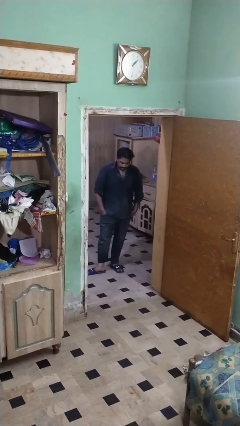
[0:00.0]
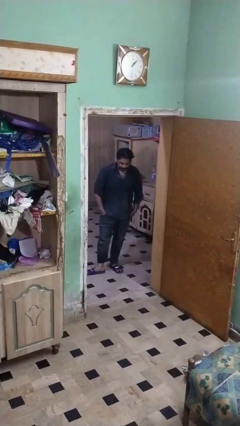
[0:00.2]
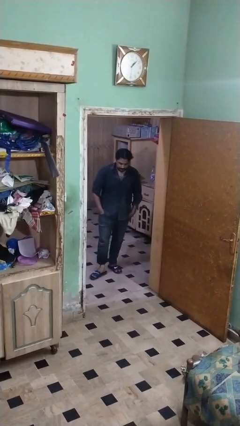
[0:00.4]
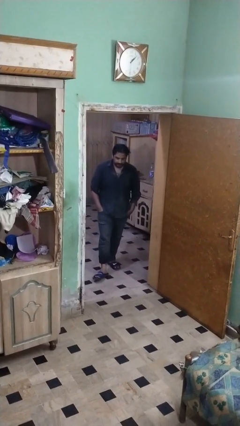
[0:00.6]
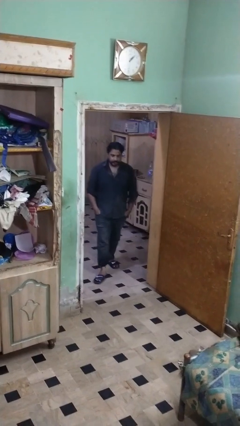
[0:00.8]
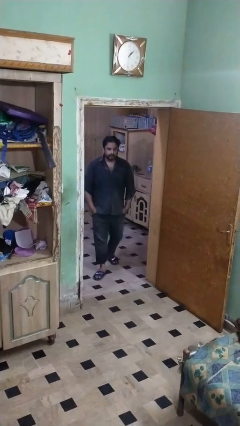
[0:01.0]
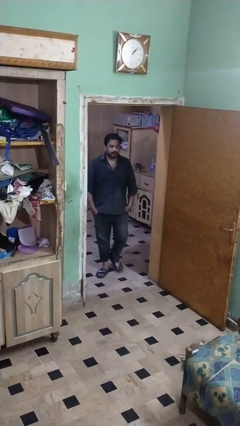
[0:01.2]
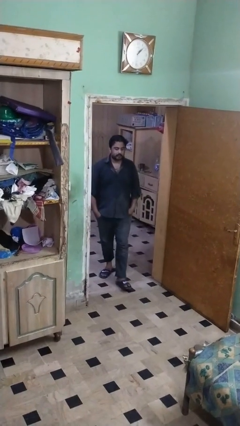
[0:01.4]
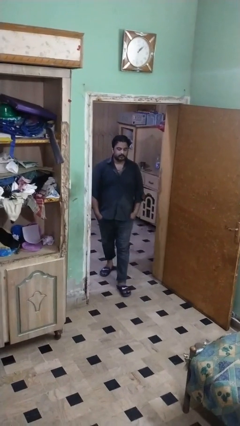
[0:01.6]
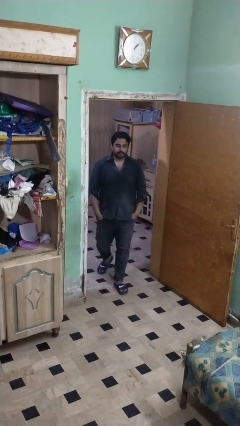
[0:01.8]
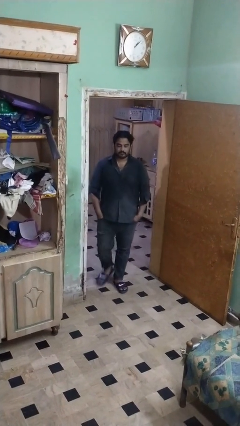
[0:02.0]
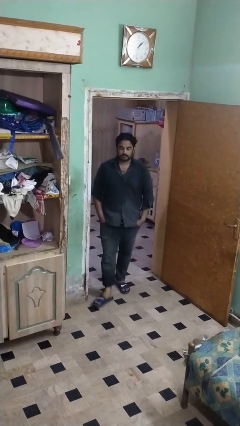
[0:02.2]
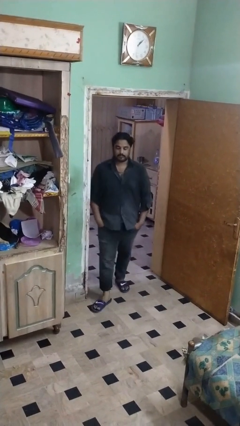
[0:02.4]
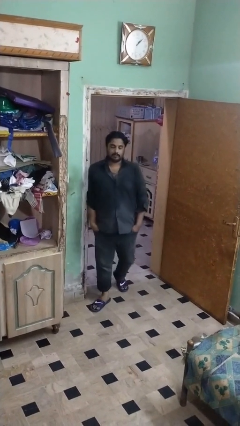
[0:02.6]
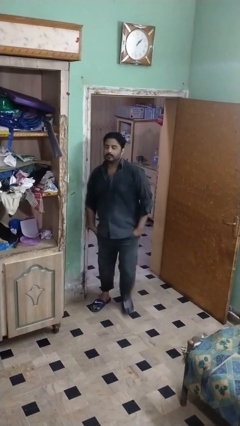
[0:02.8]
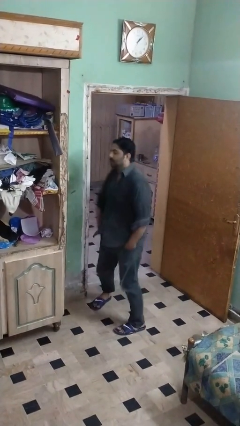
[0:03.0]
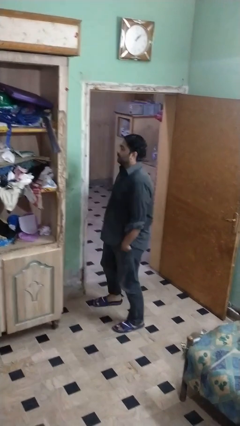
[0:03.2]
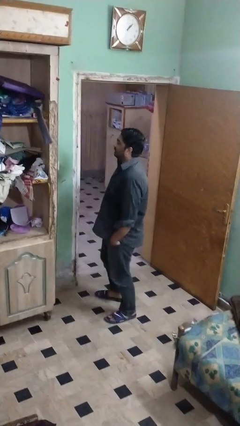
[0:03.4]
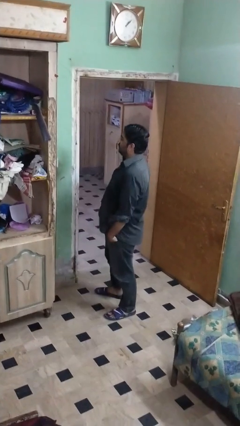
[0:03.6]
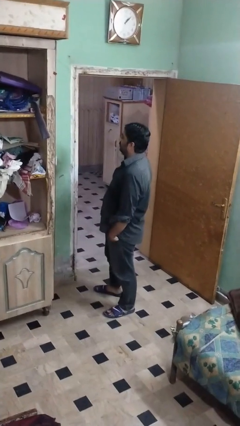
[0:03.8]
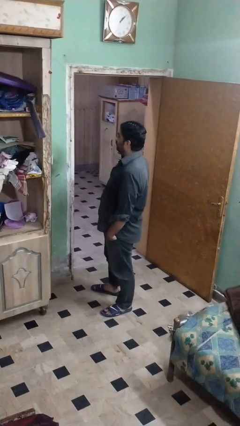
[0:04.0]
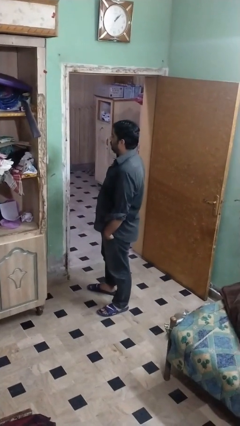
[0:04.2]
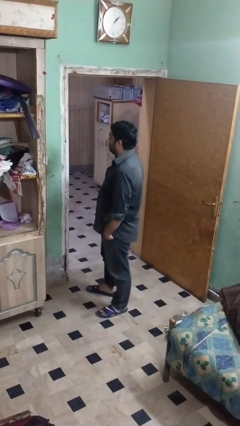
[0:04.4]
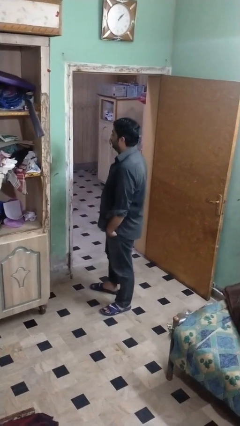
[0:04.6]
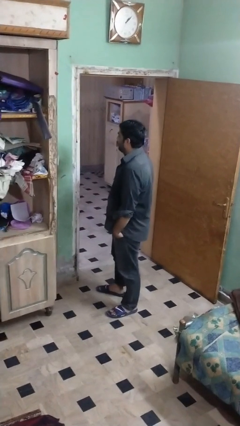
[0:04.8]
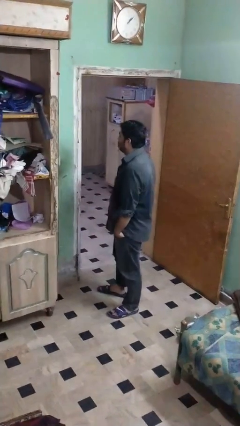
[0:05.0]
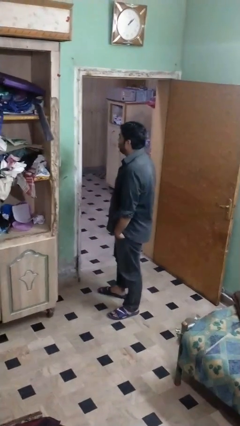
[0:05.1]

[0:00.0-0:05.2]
person bumps into wall

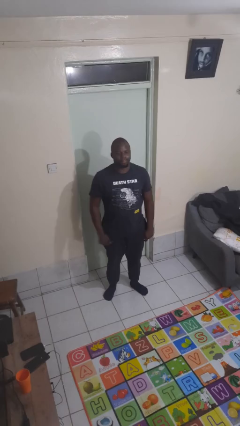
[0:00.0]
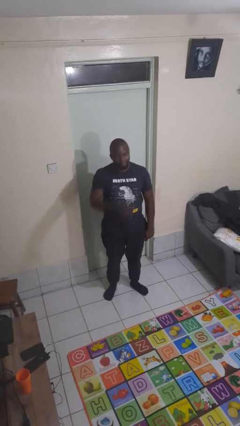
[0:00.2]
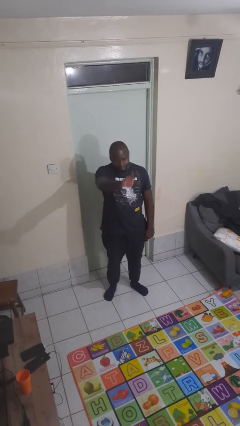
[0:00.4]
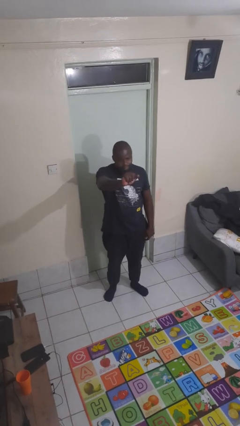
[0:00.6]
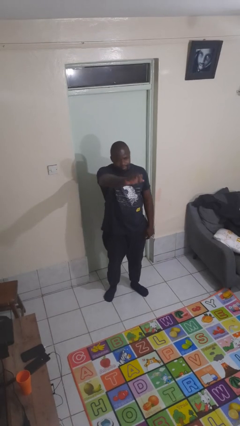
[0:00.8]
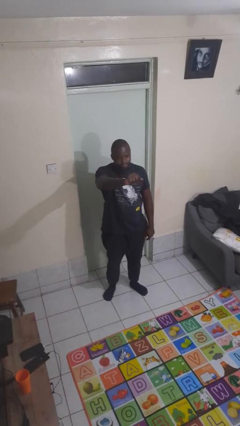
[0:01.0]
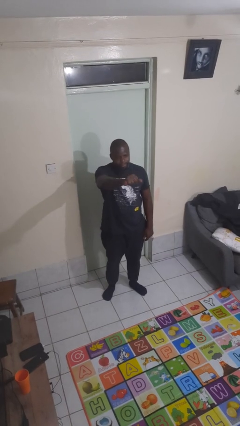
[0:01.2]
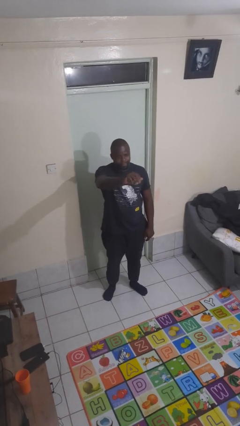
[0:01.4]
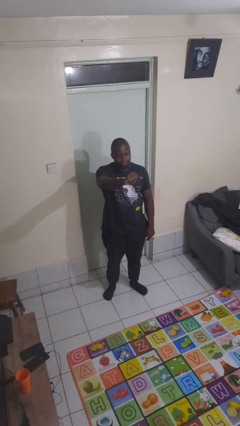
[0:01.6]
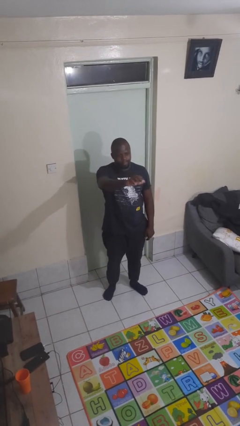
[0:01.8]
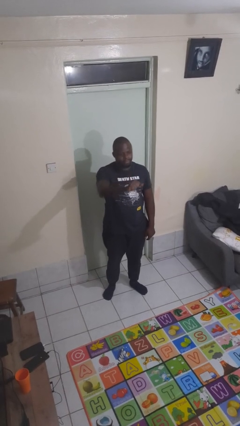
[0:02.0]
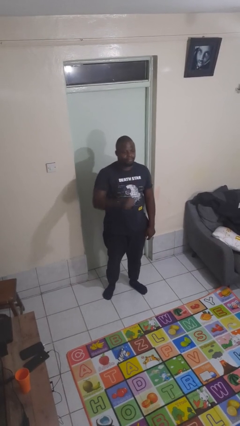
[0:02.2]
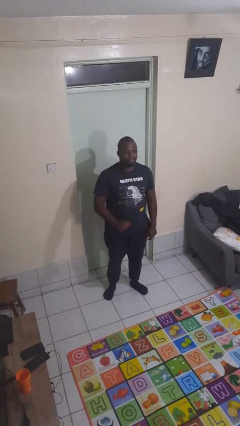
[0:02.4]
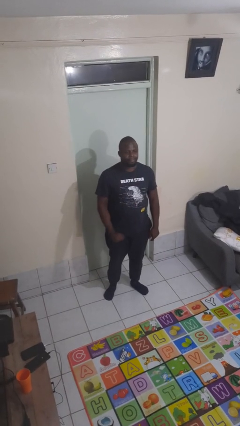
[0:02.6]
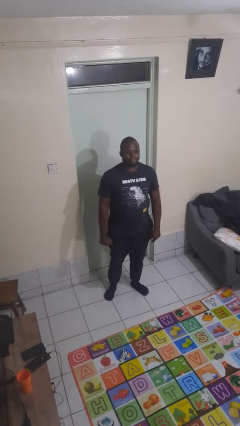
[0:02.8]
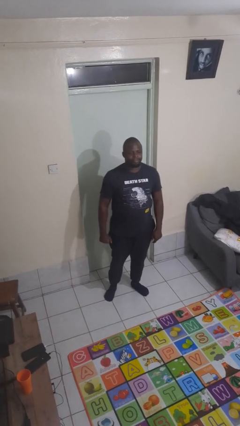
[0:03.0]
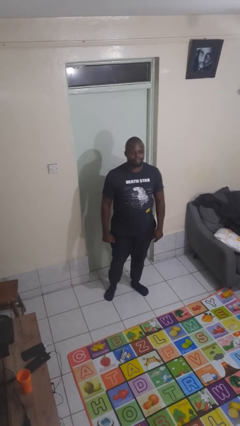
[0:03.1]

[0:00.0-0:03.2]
person gestures come here

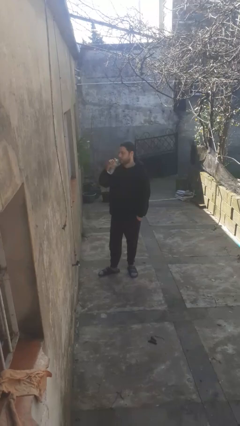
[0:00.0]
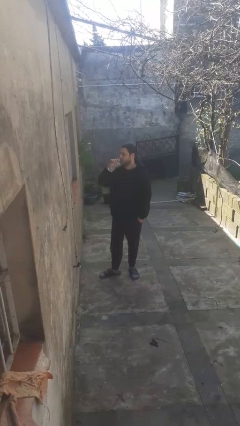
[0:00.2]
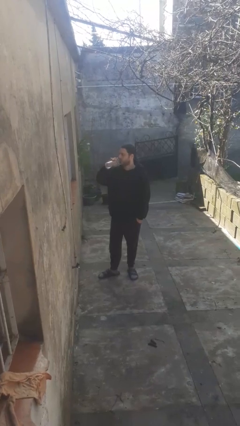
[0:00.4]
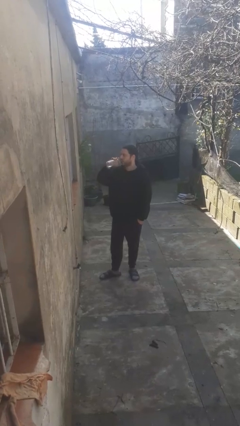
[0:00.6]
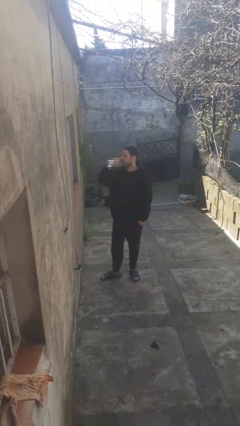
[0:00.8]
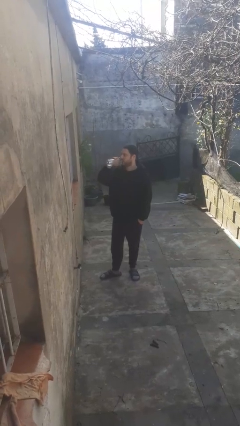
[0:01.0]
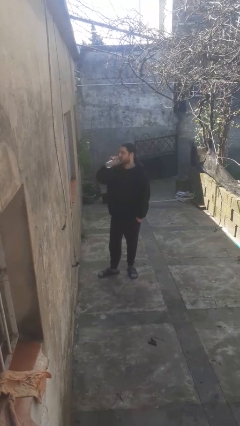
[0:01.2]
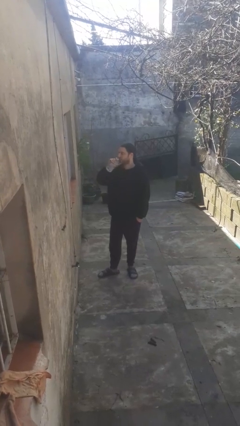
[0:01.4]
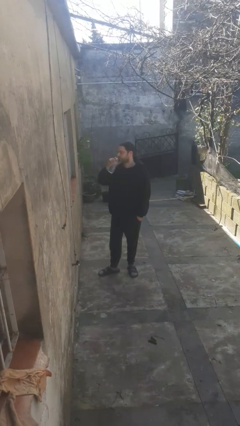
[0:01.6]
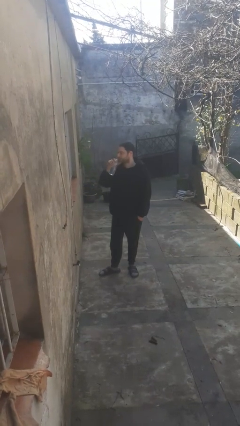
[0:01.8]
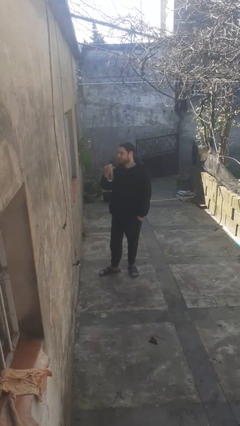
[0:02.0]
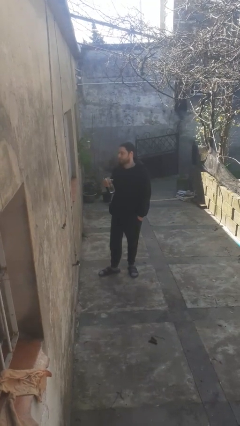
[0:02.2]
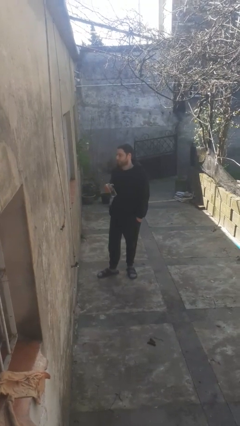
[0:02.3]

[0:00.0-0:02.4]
person drinks from bottle

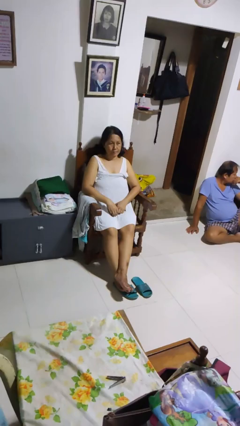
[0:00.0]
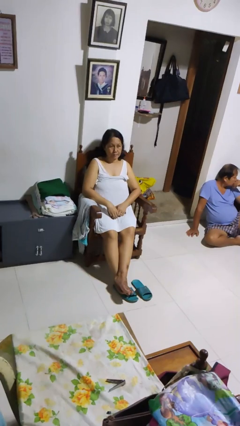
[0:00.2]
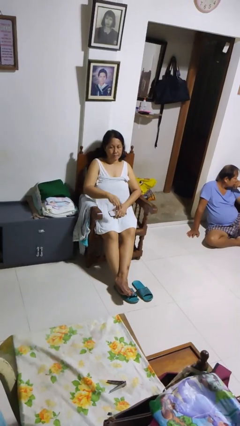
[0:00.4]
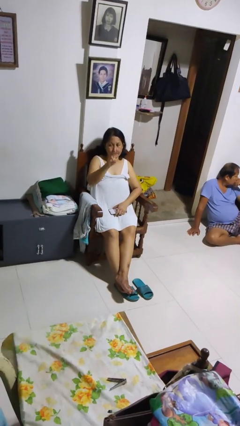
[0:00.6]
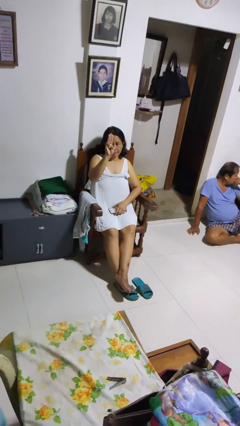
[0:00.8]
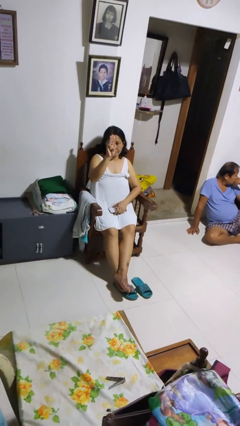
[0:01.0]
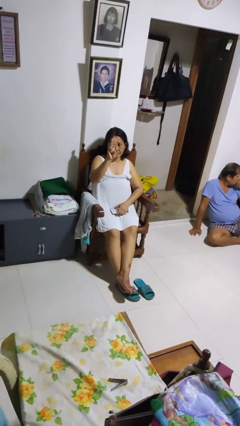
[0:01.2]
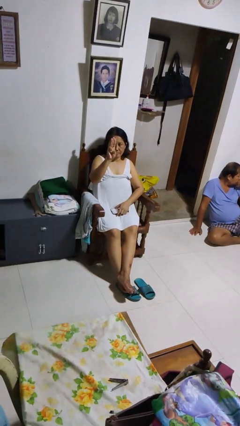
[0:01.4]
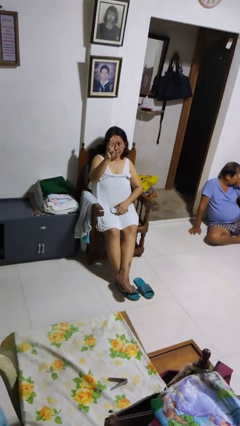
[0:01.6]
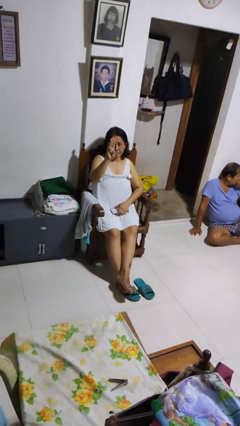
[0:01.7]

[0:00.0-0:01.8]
person gestures number three

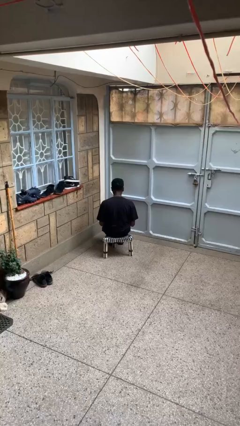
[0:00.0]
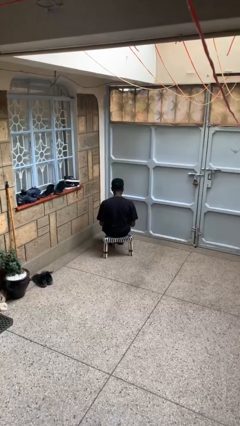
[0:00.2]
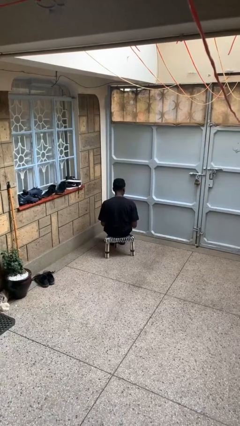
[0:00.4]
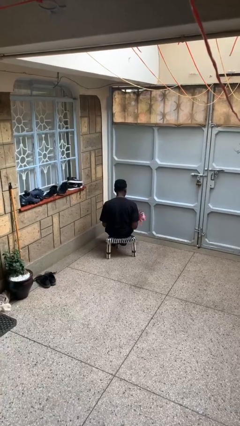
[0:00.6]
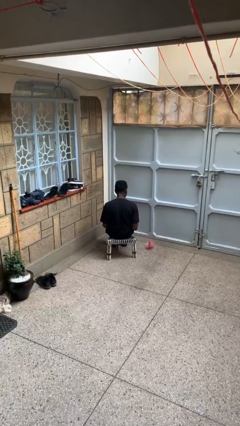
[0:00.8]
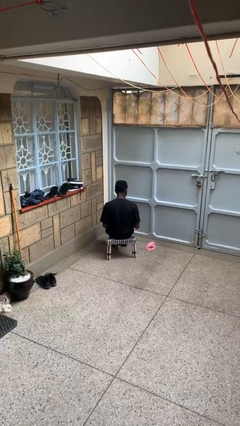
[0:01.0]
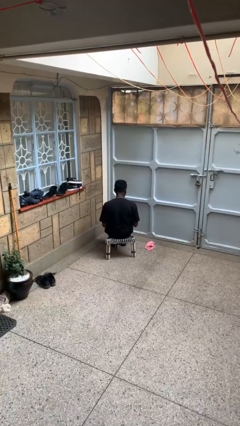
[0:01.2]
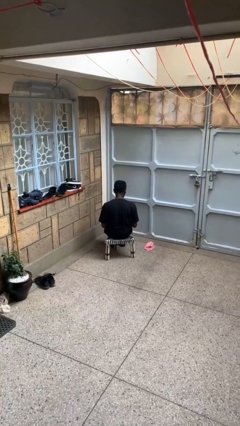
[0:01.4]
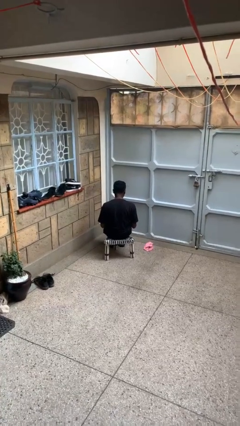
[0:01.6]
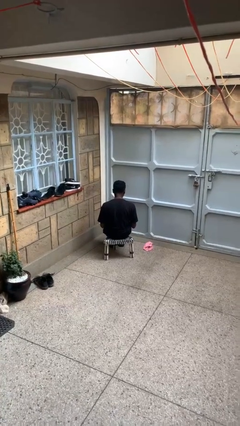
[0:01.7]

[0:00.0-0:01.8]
person throws object to ground

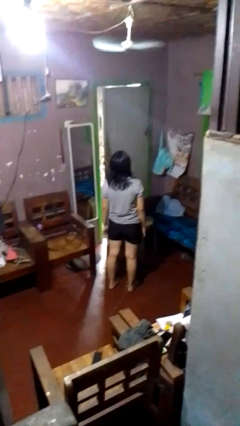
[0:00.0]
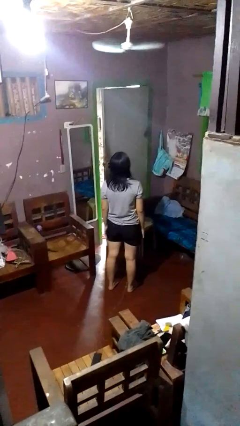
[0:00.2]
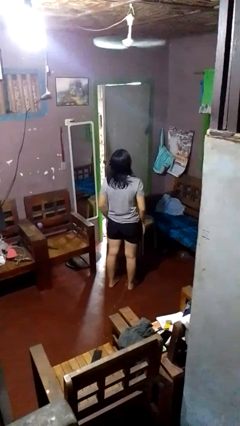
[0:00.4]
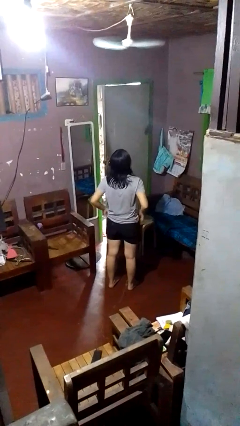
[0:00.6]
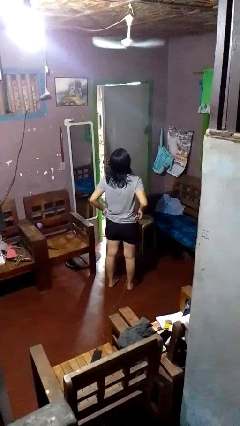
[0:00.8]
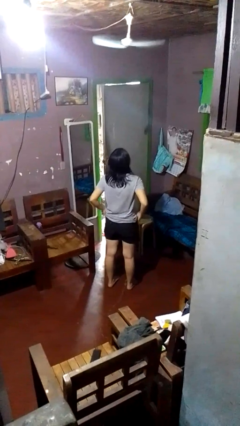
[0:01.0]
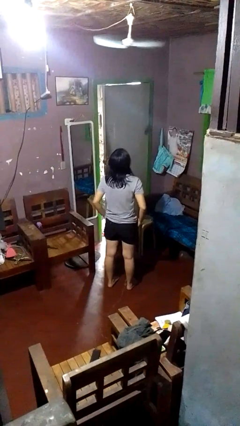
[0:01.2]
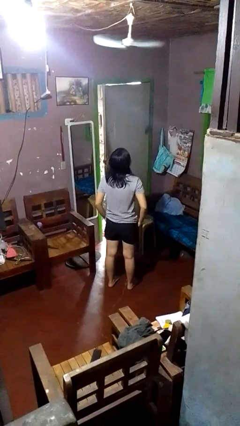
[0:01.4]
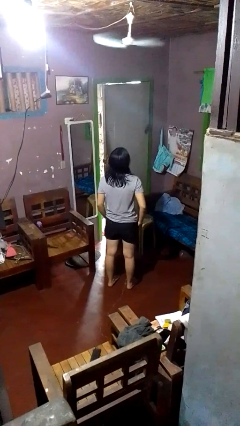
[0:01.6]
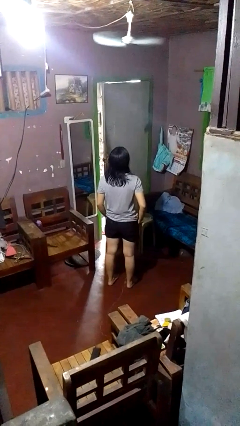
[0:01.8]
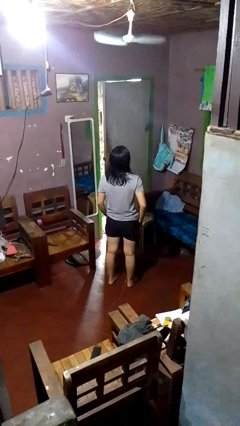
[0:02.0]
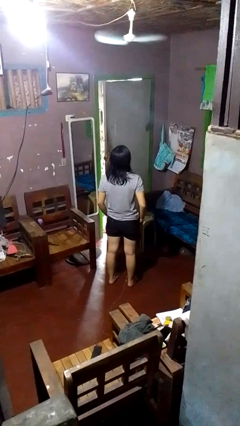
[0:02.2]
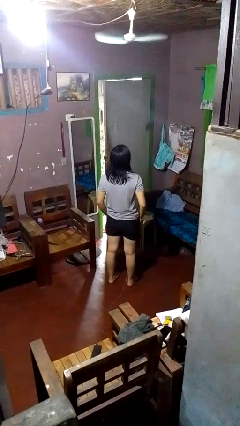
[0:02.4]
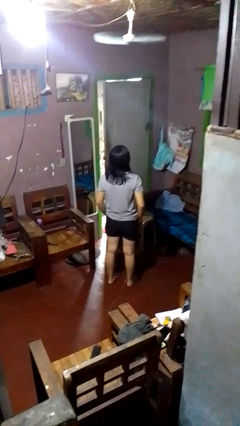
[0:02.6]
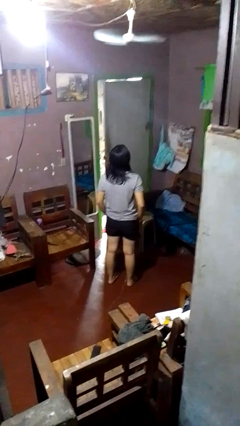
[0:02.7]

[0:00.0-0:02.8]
person puts hands in back pockets
